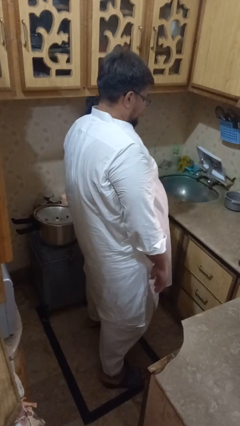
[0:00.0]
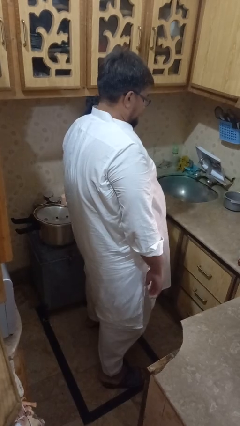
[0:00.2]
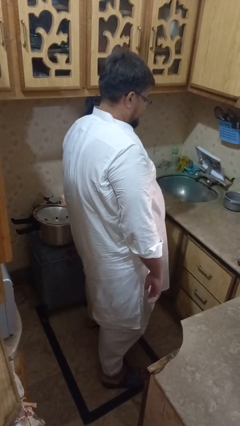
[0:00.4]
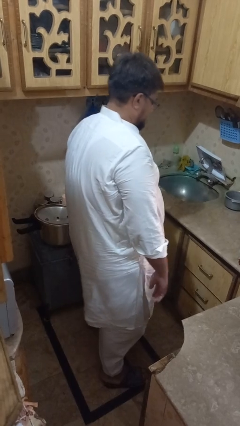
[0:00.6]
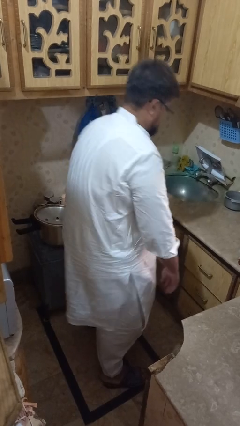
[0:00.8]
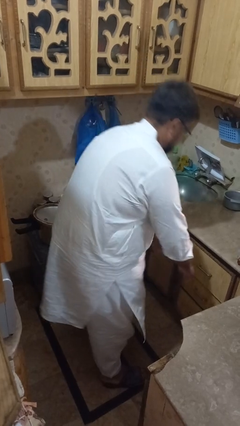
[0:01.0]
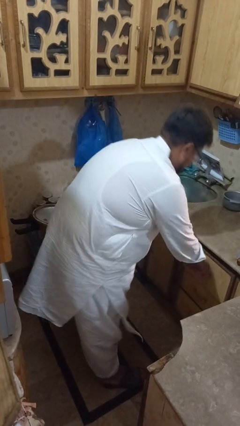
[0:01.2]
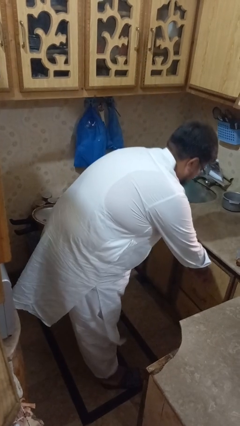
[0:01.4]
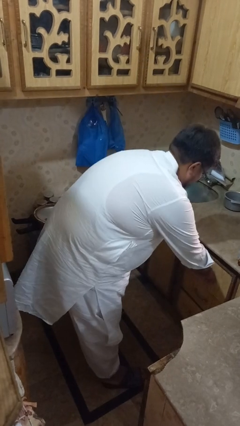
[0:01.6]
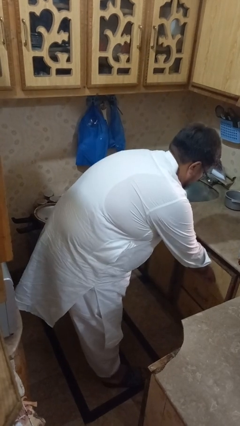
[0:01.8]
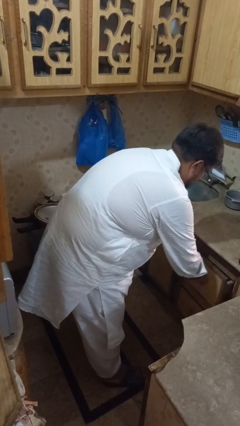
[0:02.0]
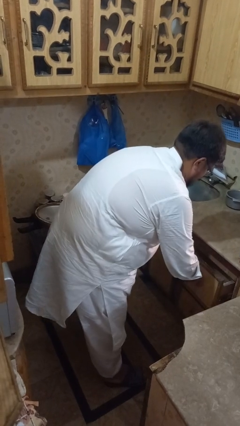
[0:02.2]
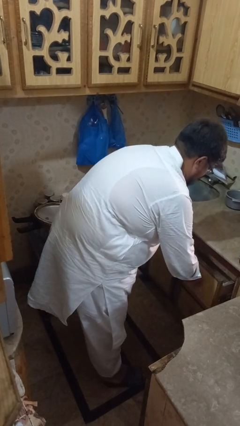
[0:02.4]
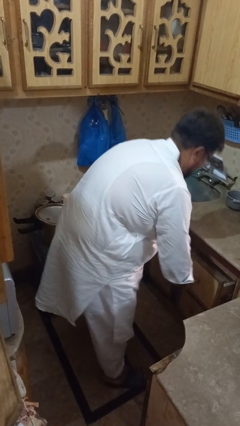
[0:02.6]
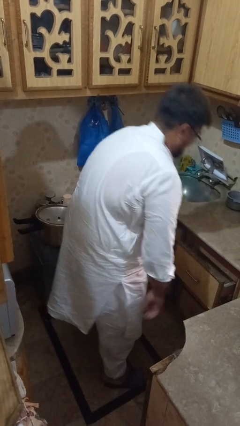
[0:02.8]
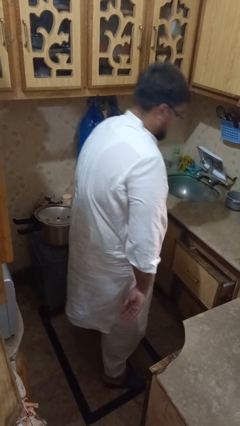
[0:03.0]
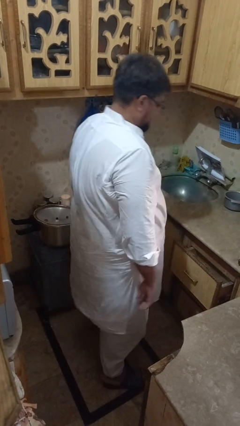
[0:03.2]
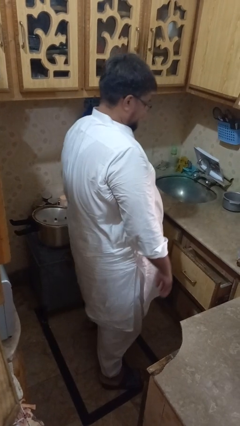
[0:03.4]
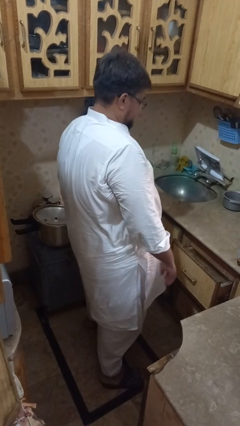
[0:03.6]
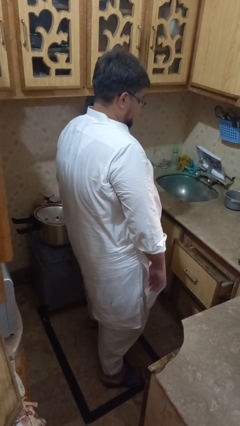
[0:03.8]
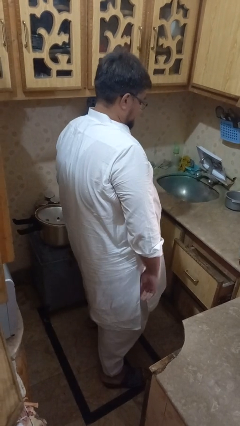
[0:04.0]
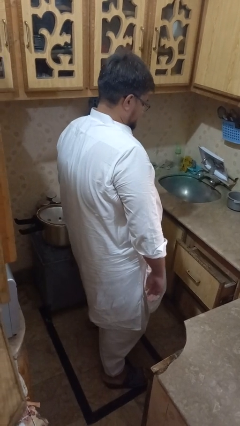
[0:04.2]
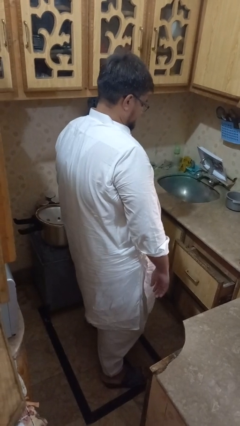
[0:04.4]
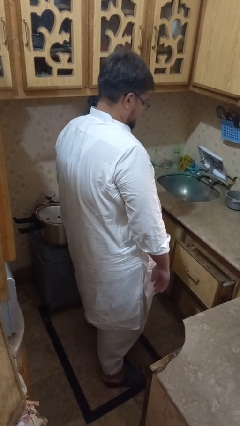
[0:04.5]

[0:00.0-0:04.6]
person opens kitchen drawer

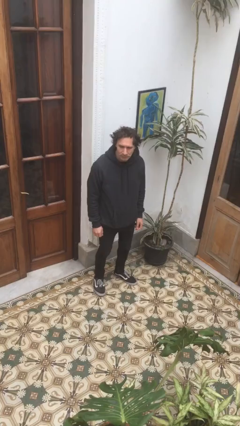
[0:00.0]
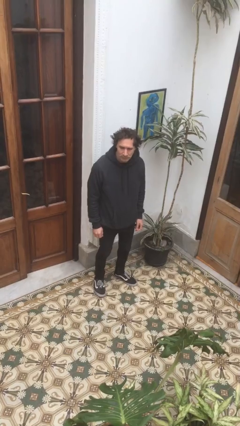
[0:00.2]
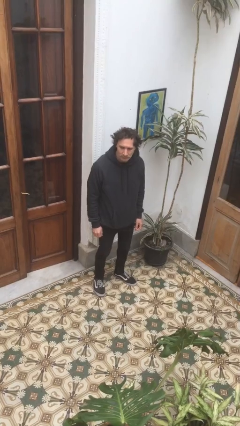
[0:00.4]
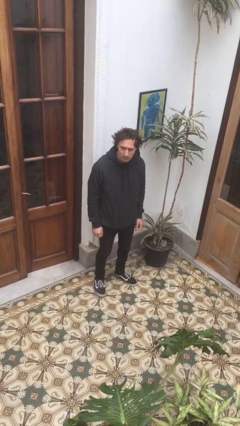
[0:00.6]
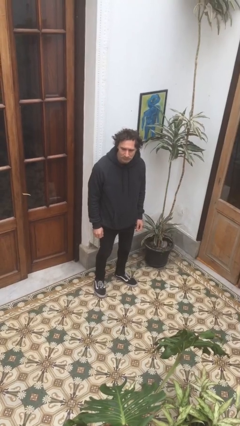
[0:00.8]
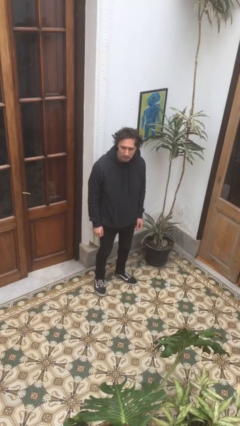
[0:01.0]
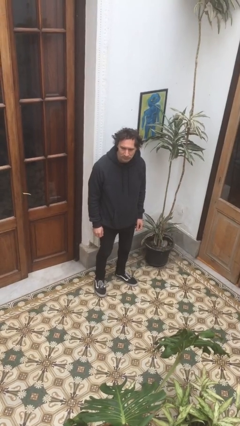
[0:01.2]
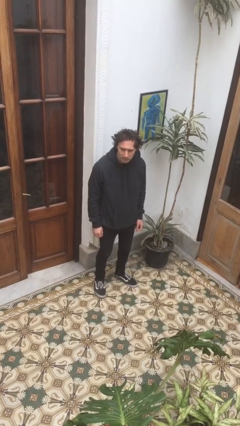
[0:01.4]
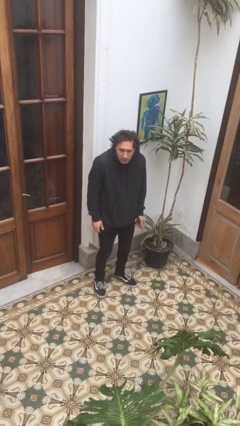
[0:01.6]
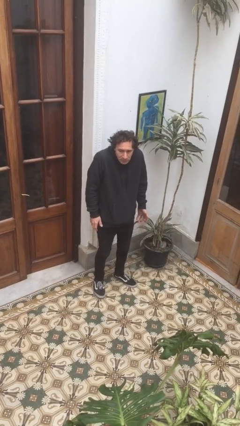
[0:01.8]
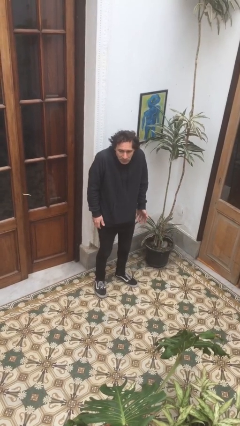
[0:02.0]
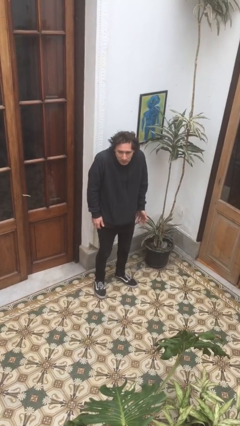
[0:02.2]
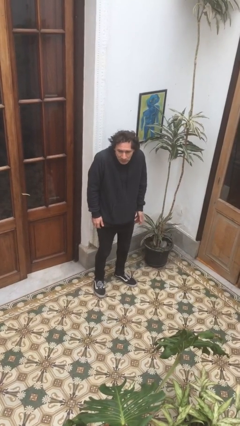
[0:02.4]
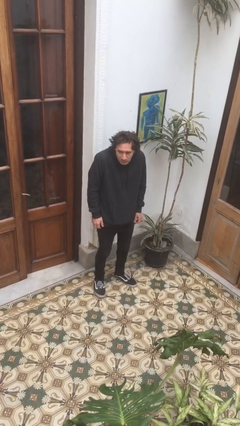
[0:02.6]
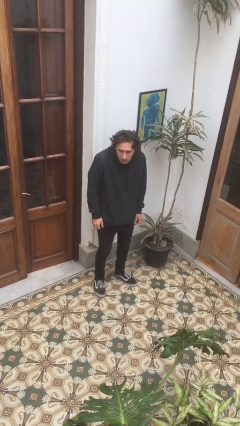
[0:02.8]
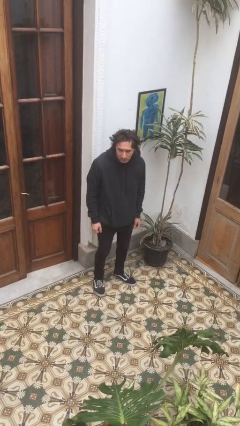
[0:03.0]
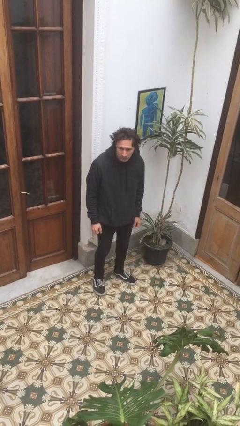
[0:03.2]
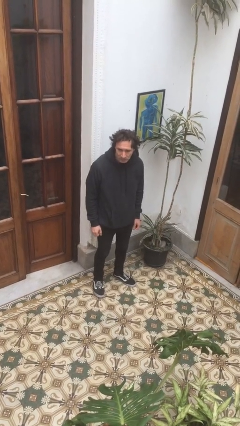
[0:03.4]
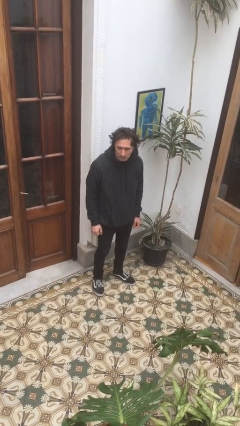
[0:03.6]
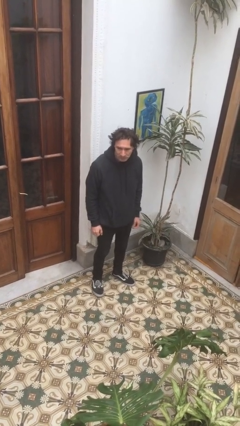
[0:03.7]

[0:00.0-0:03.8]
person shrugs

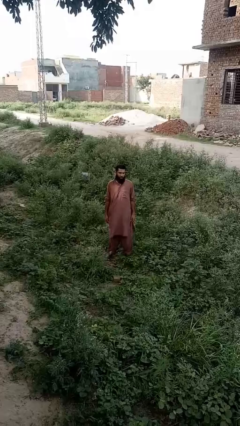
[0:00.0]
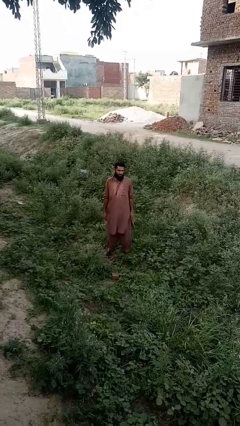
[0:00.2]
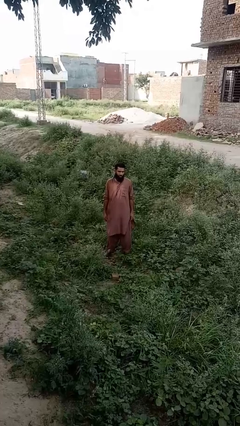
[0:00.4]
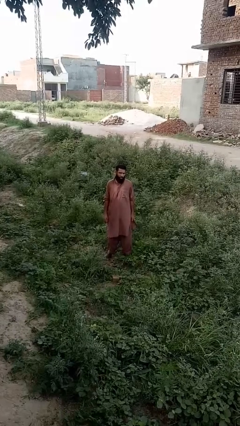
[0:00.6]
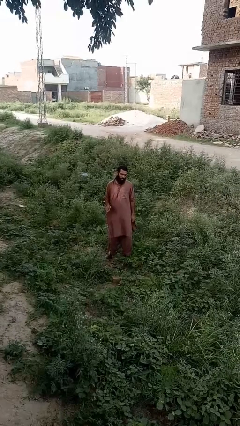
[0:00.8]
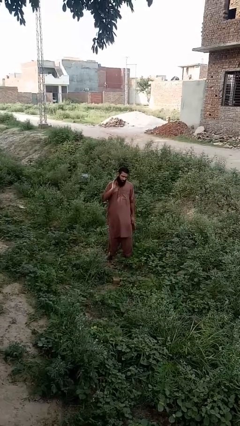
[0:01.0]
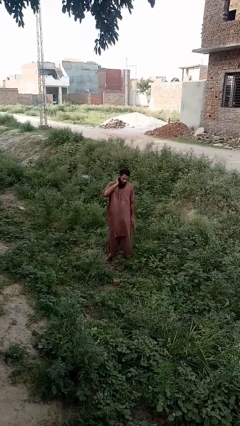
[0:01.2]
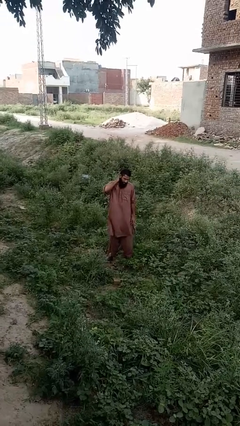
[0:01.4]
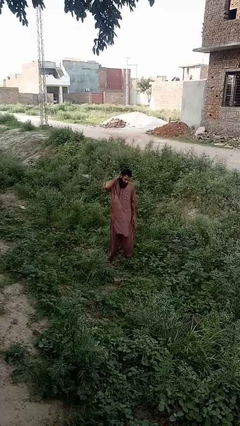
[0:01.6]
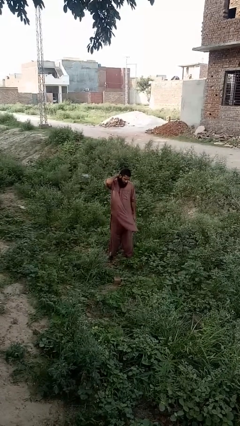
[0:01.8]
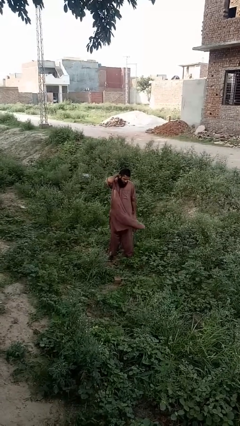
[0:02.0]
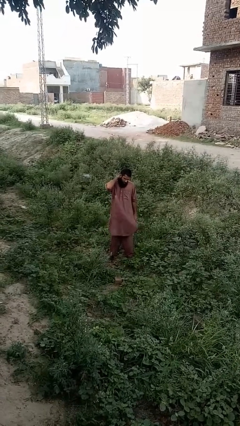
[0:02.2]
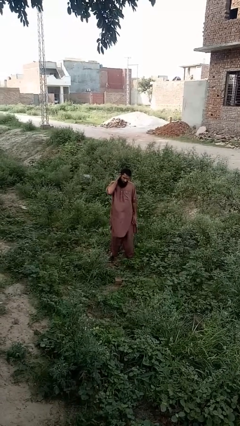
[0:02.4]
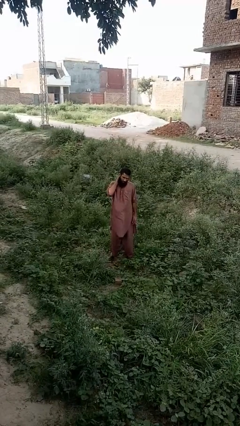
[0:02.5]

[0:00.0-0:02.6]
person rubs neck

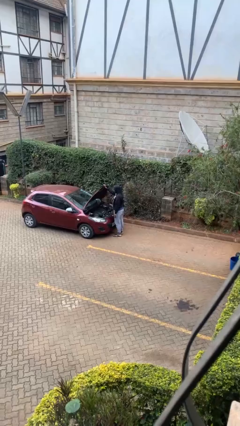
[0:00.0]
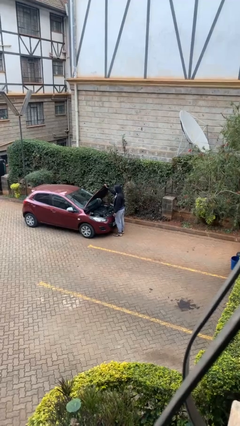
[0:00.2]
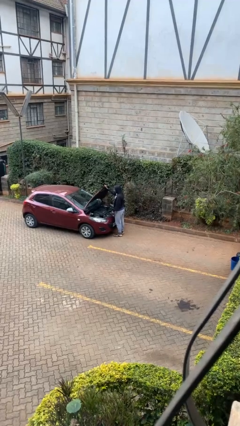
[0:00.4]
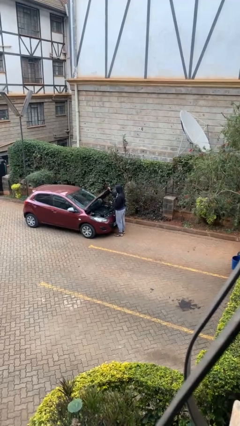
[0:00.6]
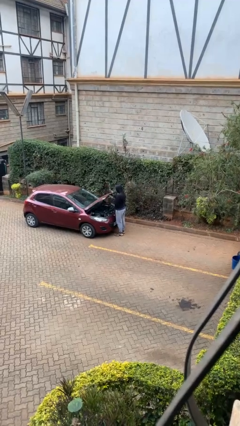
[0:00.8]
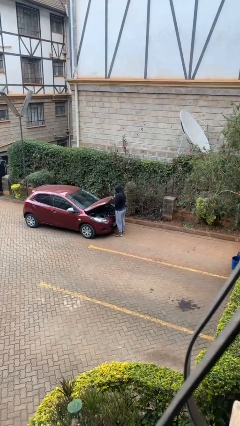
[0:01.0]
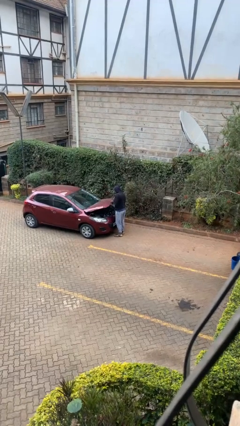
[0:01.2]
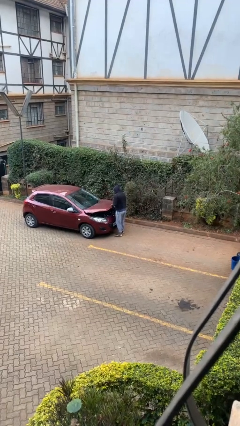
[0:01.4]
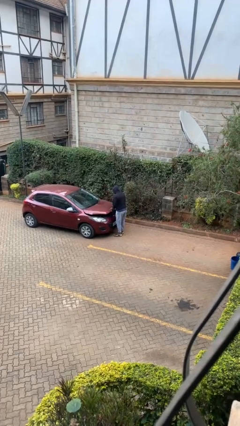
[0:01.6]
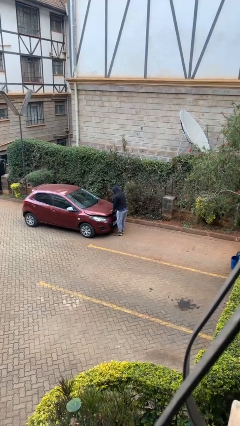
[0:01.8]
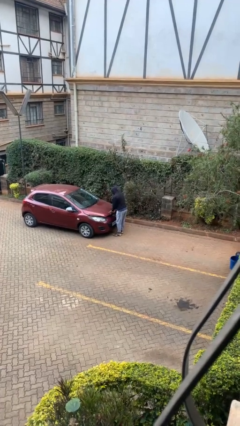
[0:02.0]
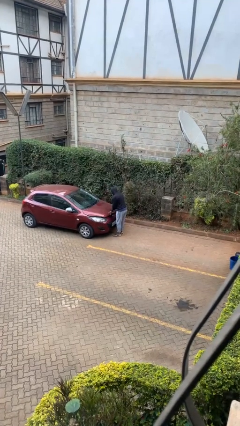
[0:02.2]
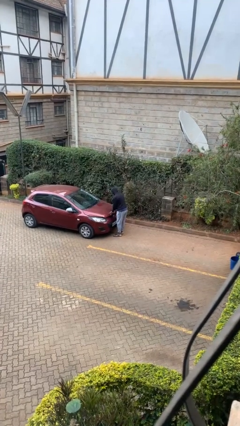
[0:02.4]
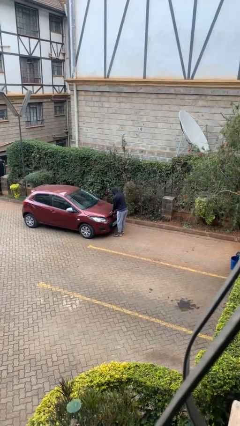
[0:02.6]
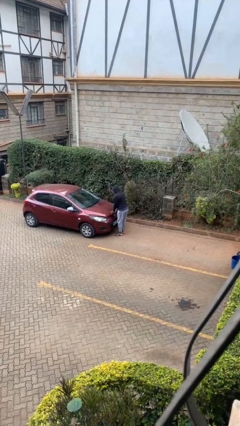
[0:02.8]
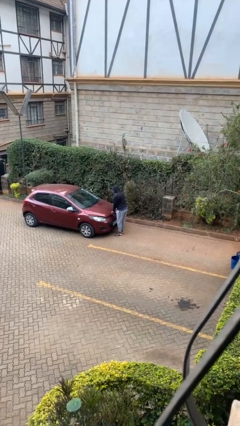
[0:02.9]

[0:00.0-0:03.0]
person closes car hood

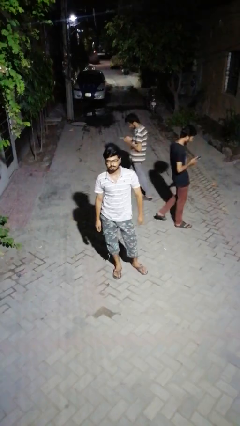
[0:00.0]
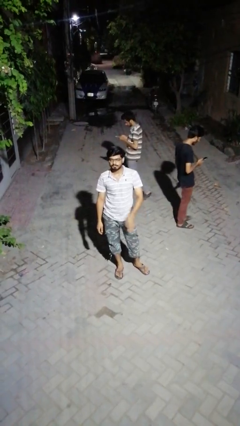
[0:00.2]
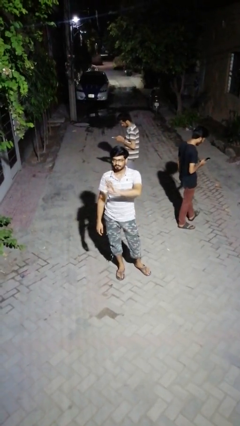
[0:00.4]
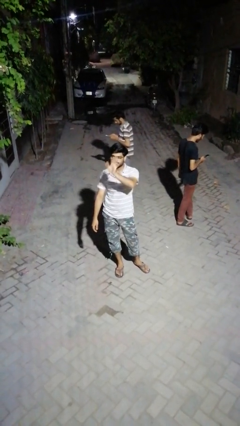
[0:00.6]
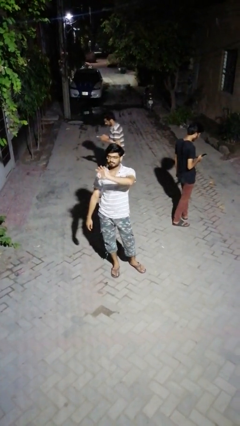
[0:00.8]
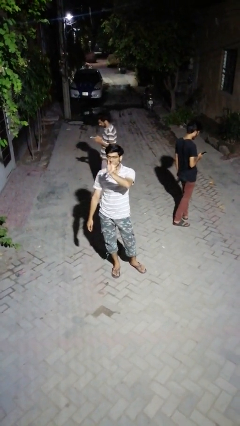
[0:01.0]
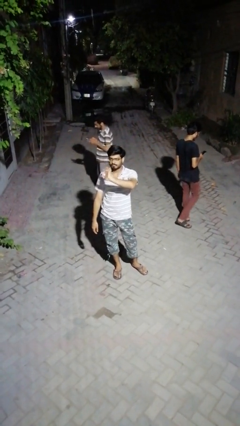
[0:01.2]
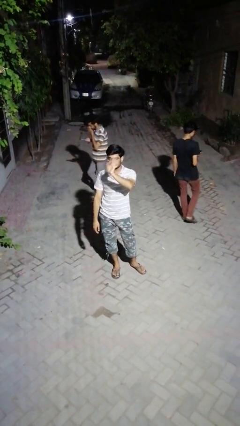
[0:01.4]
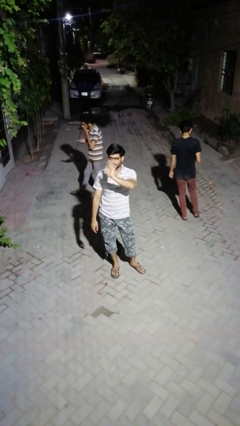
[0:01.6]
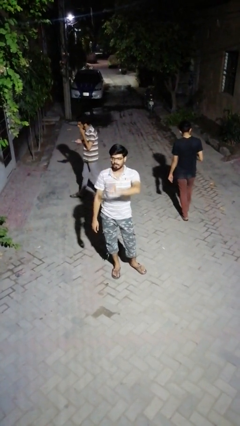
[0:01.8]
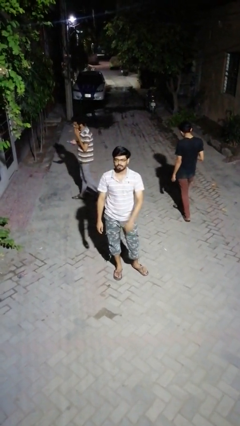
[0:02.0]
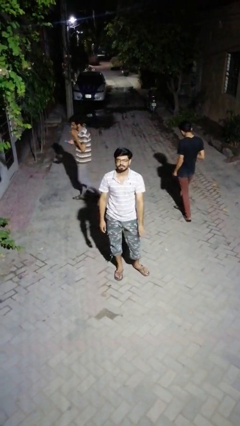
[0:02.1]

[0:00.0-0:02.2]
person waves at person

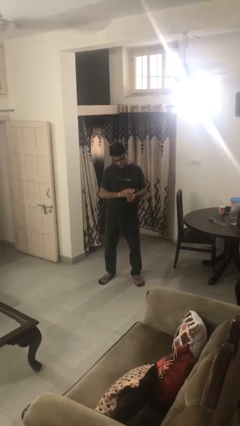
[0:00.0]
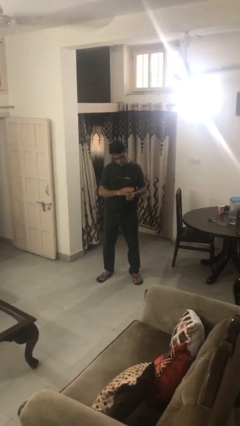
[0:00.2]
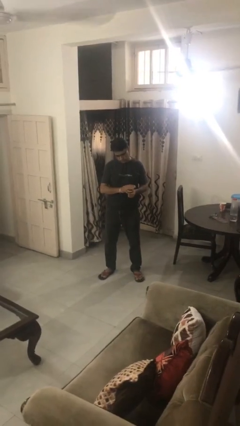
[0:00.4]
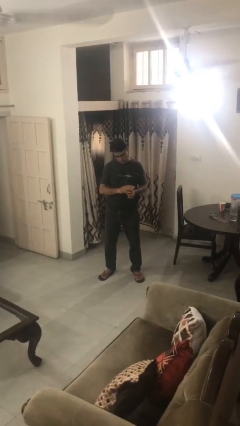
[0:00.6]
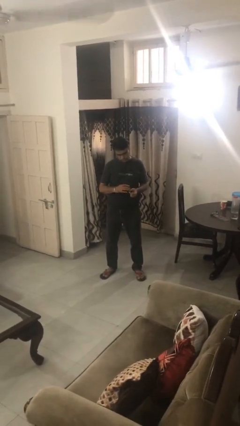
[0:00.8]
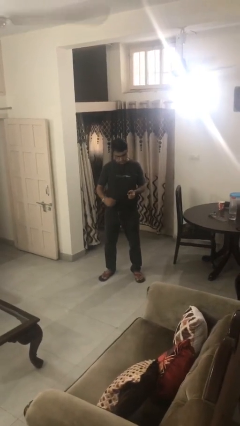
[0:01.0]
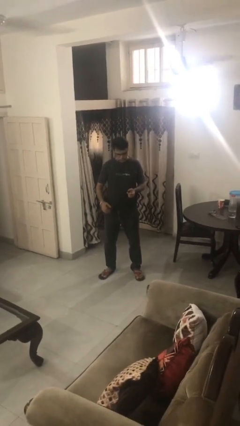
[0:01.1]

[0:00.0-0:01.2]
person takes off ring
